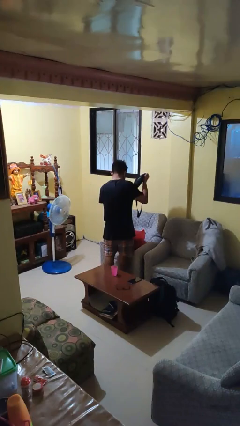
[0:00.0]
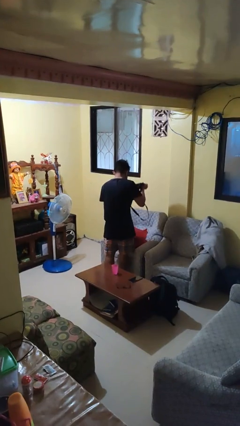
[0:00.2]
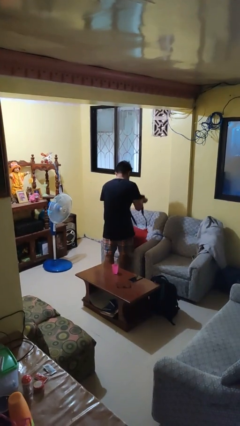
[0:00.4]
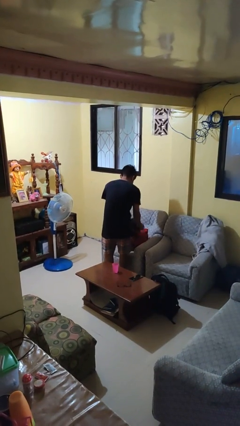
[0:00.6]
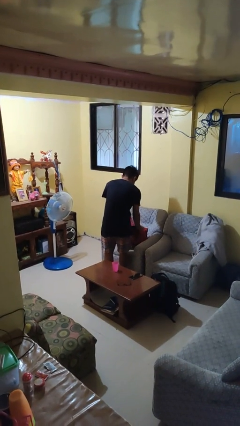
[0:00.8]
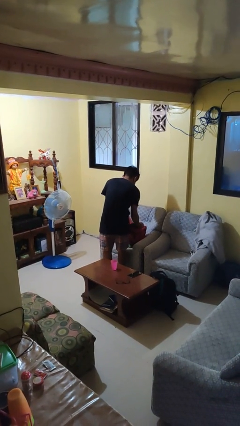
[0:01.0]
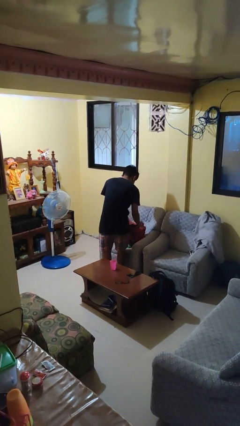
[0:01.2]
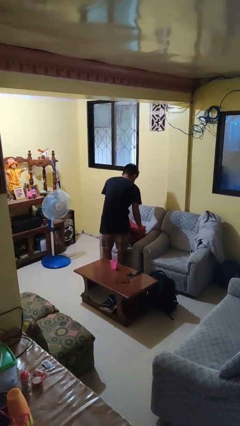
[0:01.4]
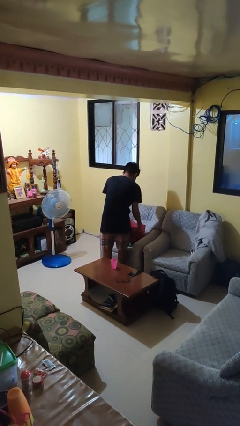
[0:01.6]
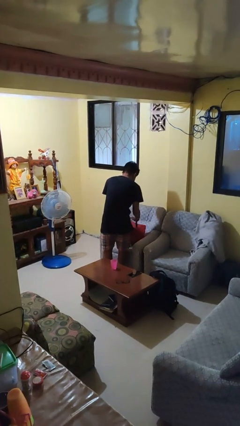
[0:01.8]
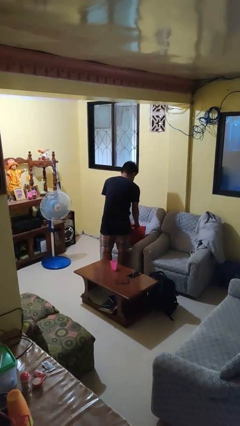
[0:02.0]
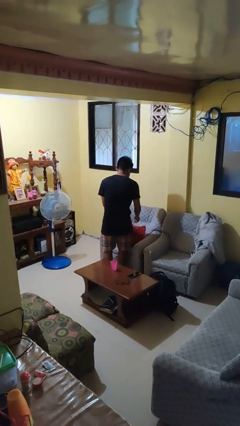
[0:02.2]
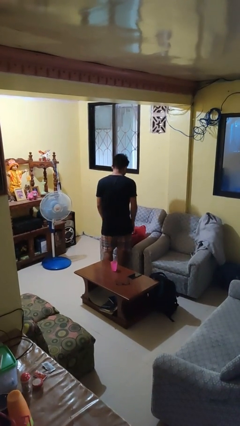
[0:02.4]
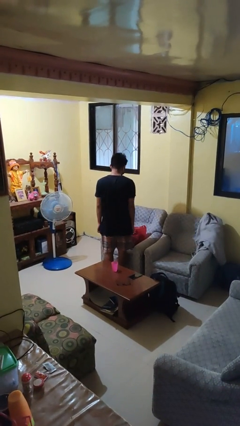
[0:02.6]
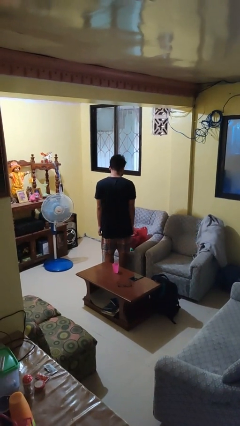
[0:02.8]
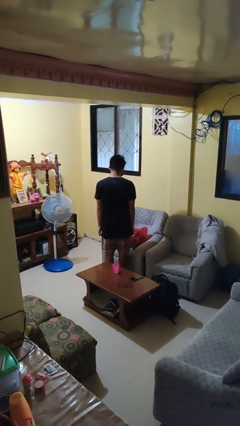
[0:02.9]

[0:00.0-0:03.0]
person puts object into bag

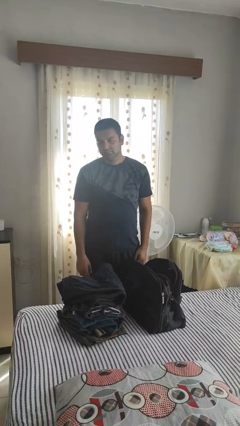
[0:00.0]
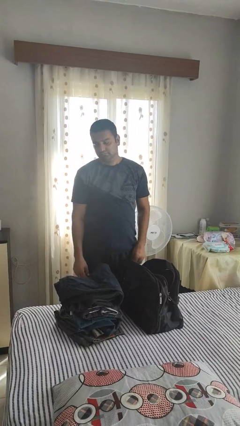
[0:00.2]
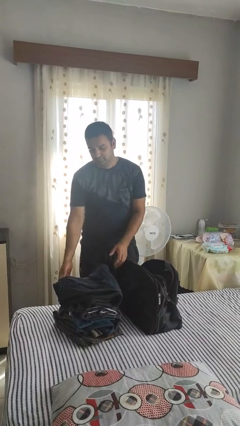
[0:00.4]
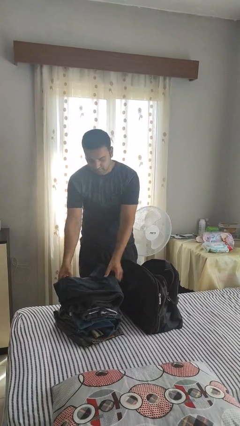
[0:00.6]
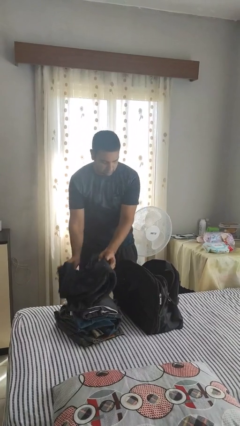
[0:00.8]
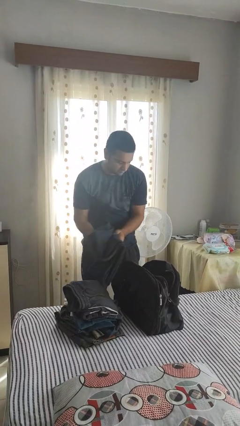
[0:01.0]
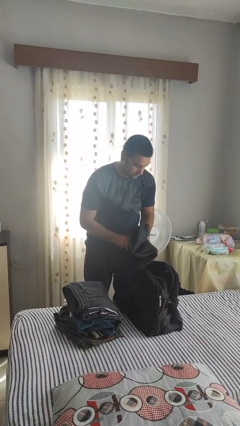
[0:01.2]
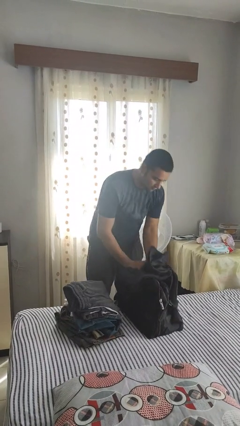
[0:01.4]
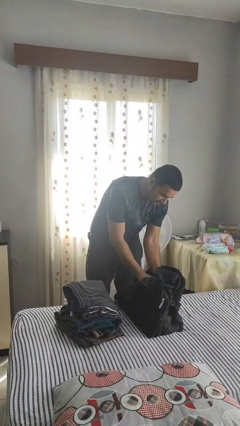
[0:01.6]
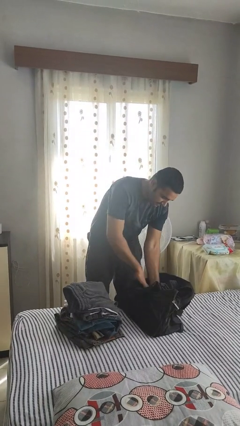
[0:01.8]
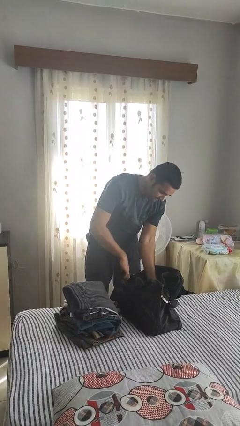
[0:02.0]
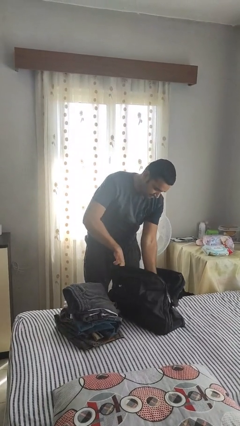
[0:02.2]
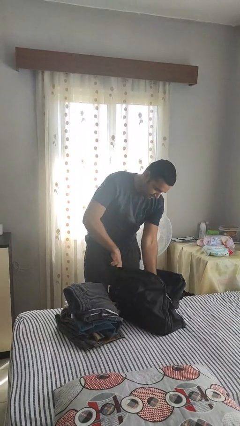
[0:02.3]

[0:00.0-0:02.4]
person loads clothes into suitcase

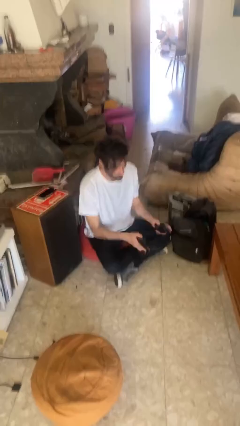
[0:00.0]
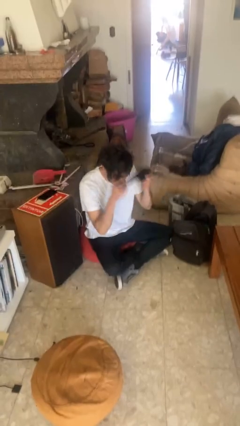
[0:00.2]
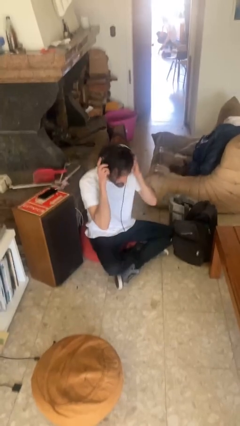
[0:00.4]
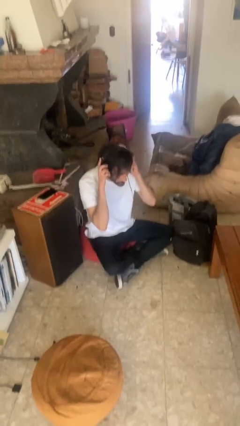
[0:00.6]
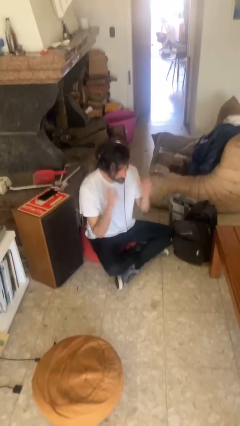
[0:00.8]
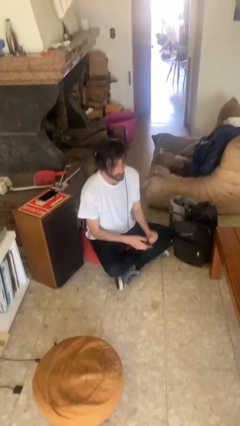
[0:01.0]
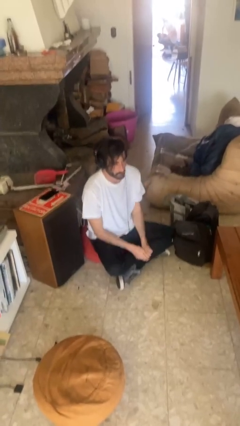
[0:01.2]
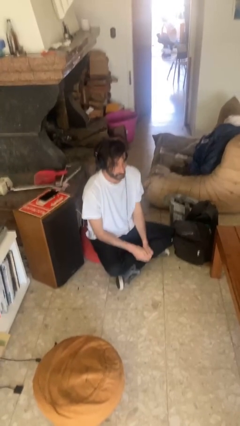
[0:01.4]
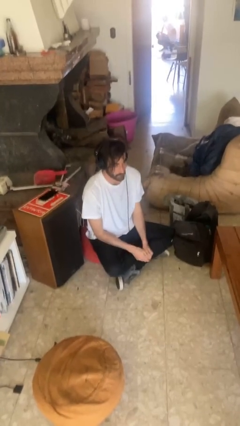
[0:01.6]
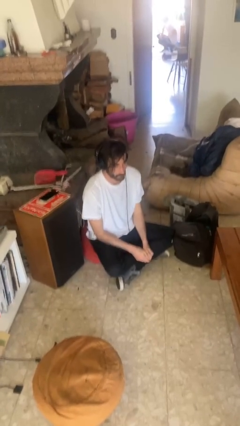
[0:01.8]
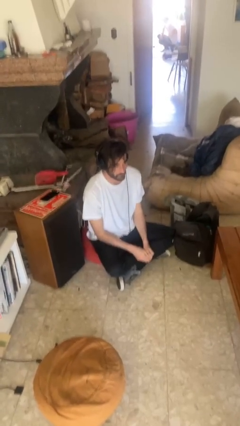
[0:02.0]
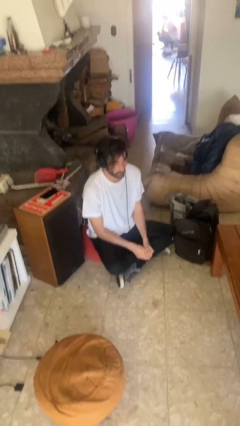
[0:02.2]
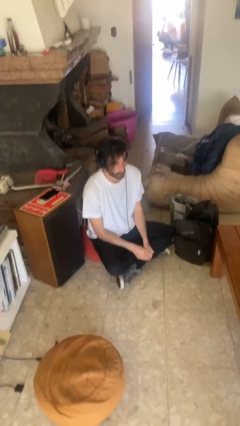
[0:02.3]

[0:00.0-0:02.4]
person puts on headphones

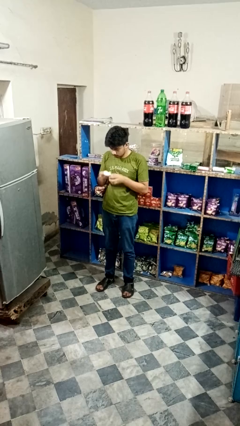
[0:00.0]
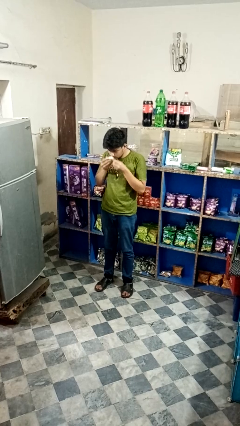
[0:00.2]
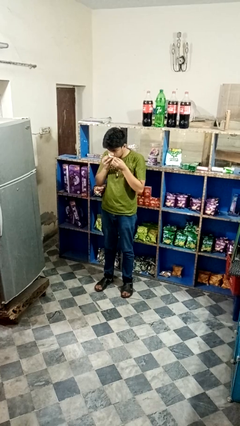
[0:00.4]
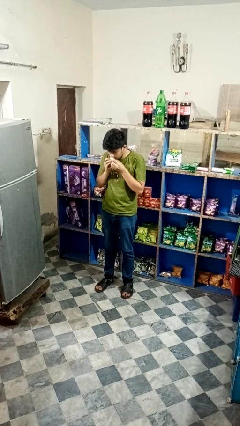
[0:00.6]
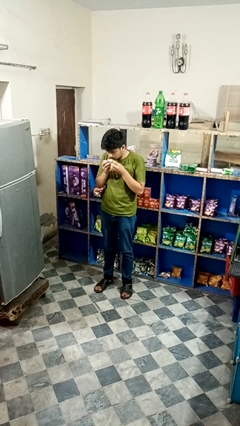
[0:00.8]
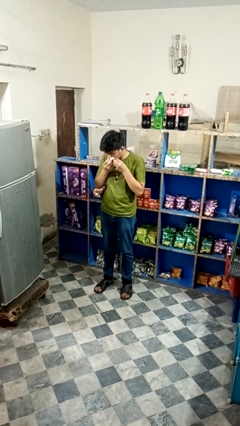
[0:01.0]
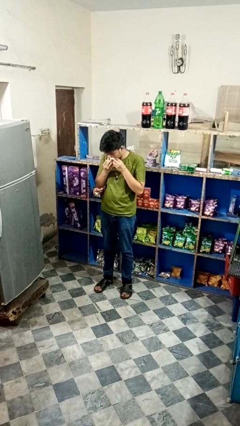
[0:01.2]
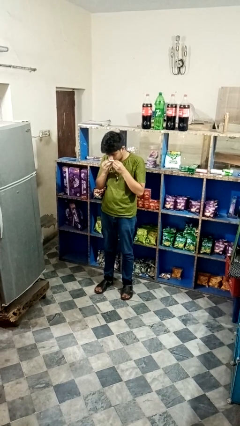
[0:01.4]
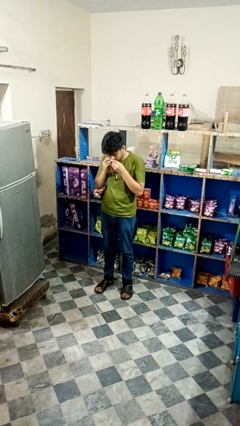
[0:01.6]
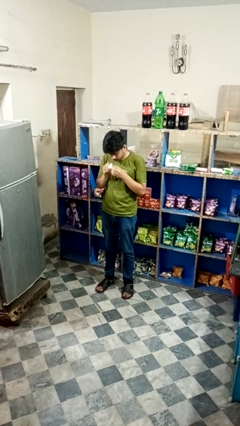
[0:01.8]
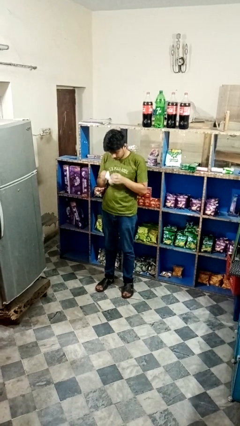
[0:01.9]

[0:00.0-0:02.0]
person wipes mouth with napkin

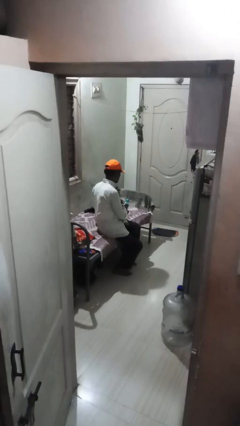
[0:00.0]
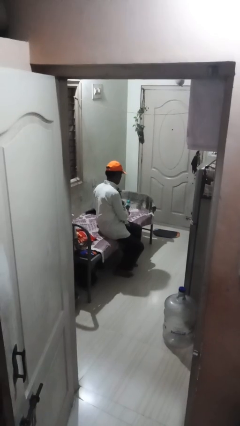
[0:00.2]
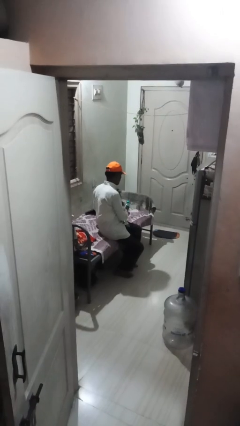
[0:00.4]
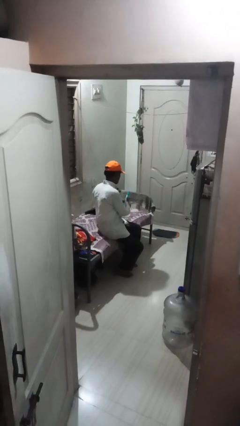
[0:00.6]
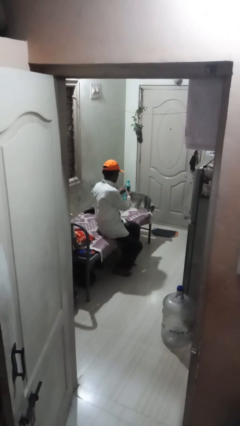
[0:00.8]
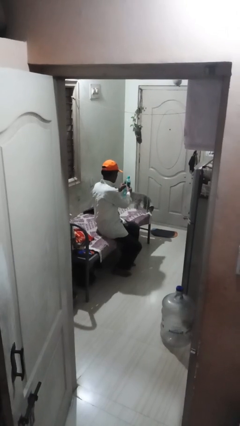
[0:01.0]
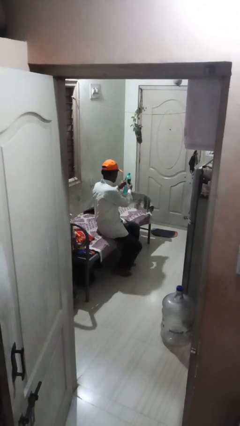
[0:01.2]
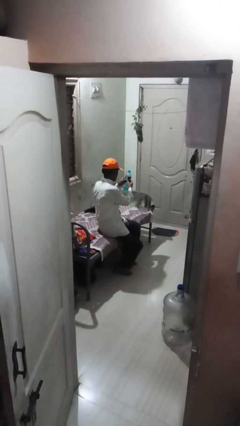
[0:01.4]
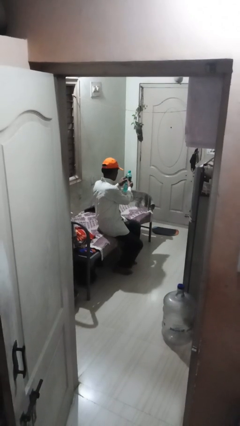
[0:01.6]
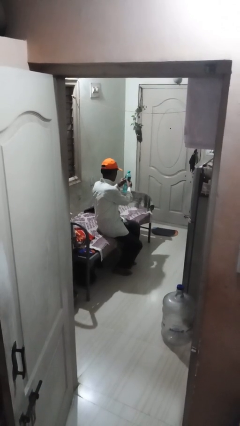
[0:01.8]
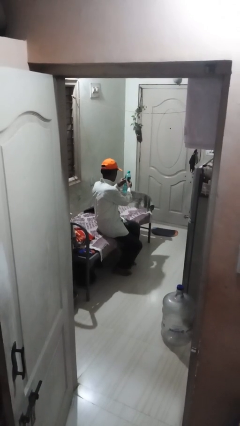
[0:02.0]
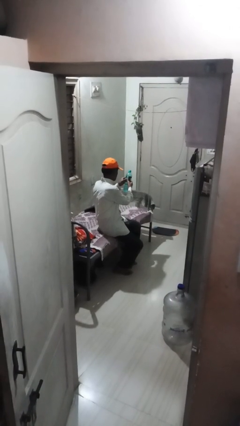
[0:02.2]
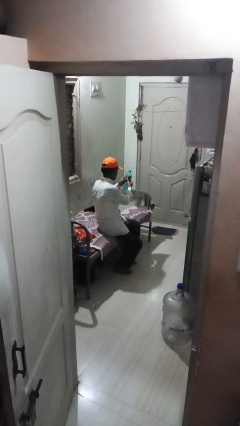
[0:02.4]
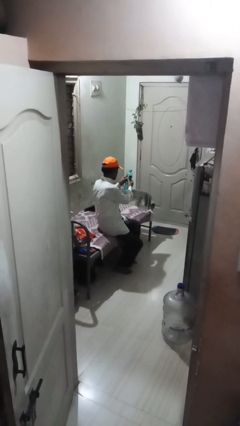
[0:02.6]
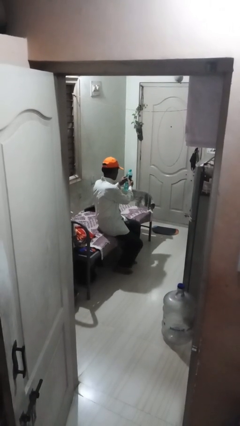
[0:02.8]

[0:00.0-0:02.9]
person squeezes object

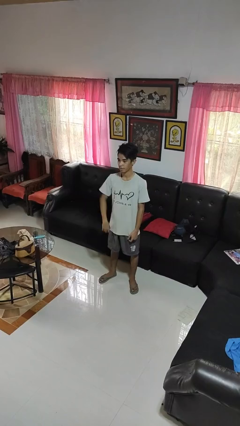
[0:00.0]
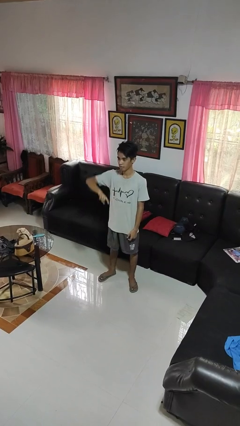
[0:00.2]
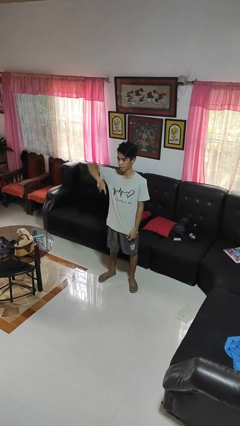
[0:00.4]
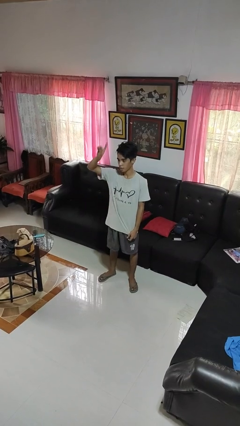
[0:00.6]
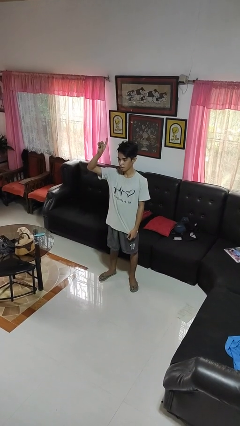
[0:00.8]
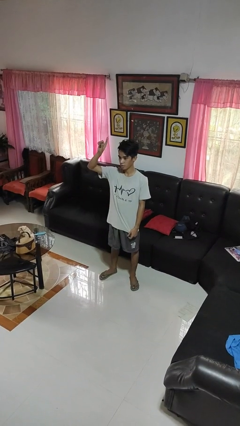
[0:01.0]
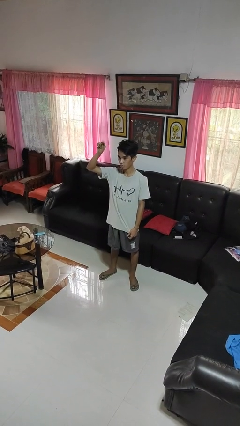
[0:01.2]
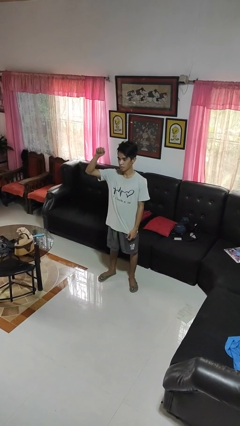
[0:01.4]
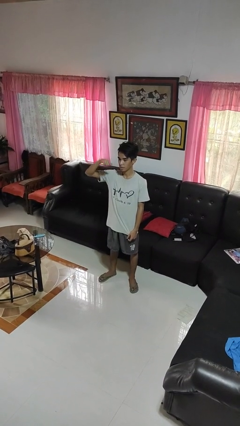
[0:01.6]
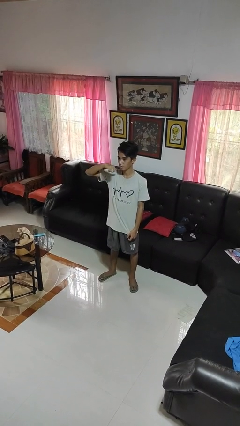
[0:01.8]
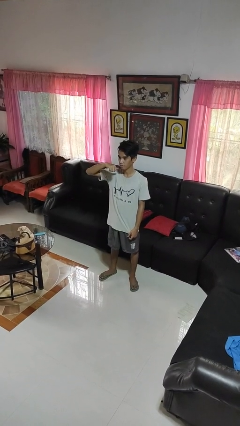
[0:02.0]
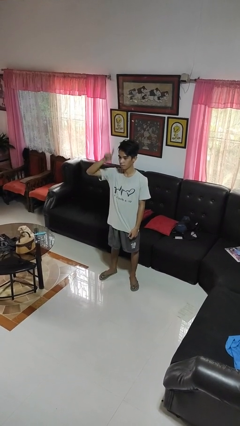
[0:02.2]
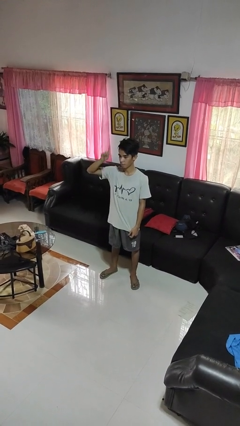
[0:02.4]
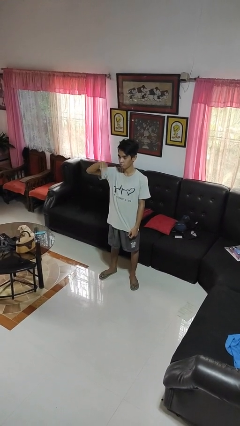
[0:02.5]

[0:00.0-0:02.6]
person gestures swipe up

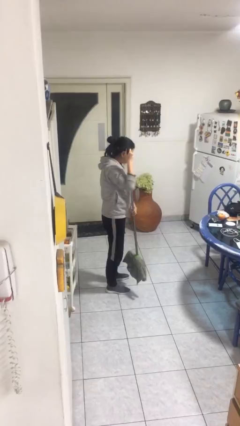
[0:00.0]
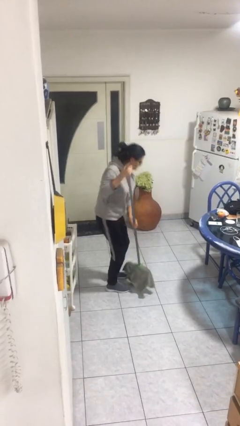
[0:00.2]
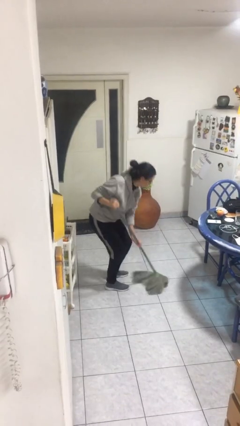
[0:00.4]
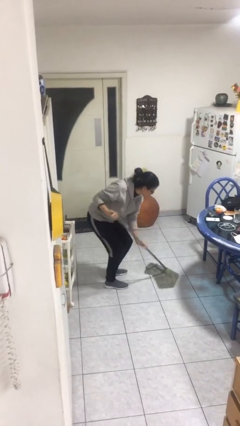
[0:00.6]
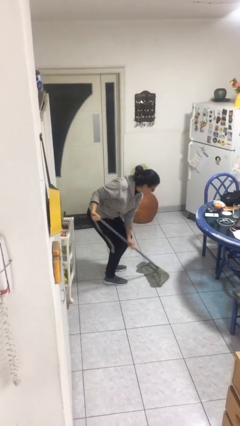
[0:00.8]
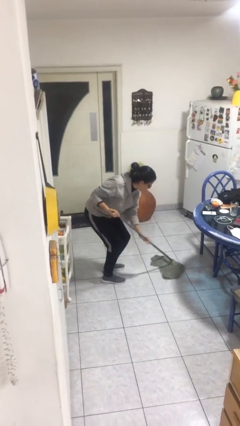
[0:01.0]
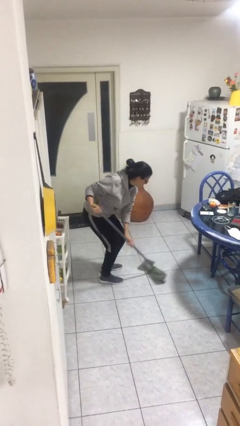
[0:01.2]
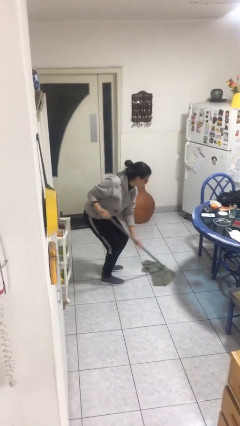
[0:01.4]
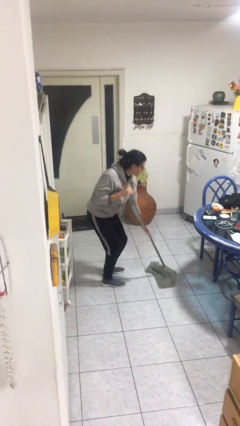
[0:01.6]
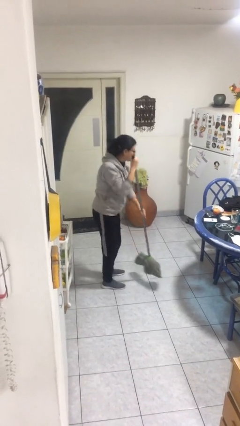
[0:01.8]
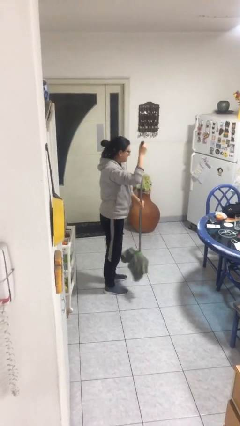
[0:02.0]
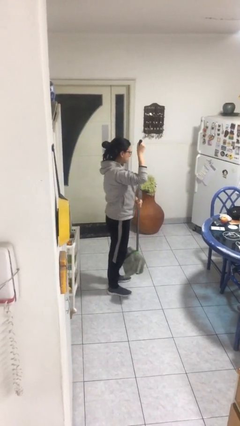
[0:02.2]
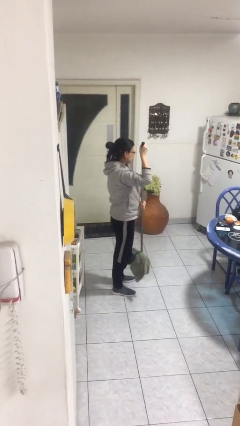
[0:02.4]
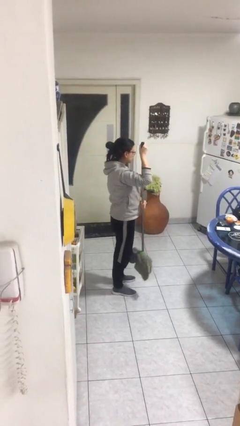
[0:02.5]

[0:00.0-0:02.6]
person sweeps floor
